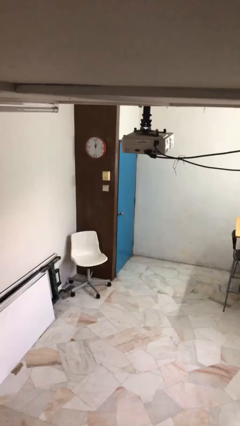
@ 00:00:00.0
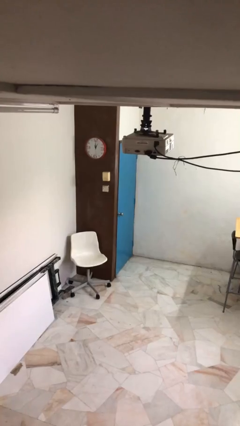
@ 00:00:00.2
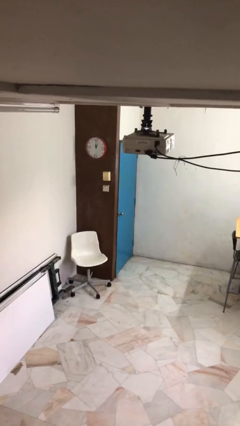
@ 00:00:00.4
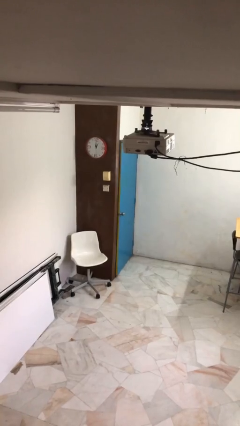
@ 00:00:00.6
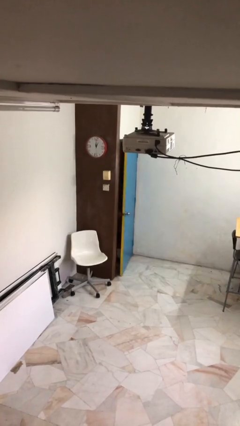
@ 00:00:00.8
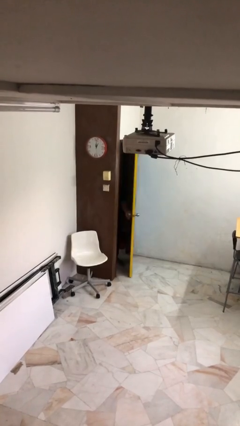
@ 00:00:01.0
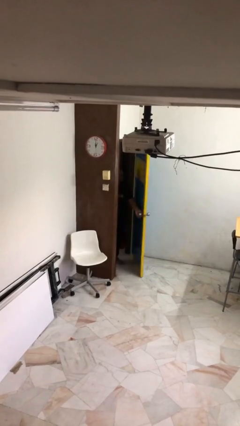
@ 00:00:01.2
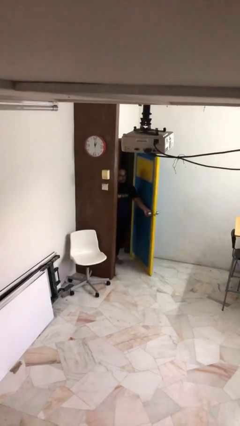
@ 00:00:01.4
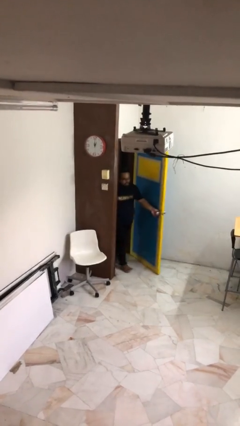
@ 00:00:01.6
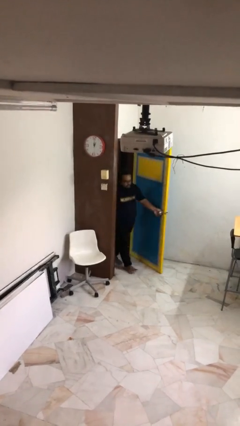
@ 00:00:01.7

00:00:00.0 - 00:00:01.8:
person opens facility door

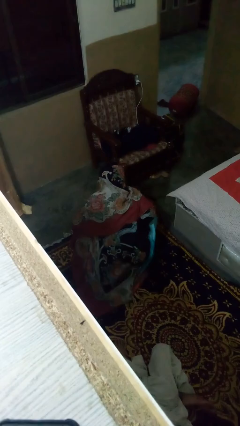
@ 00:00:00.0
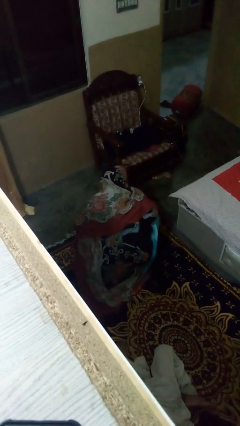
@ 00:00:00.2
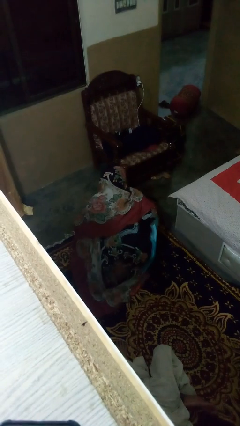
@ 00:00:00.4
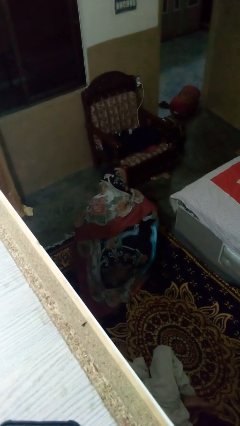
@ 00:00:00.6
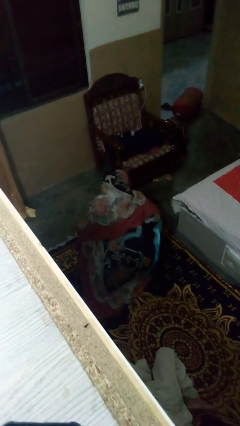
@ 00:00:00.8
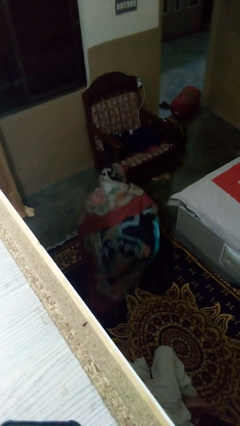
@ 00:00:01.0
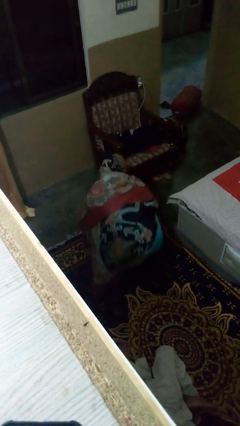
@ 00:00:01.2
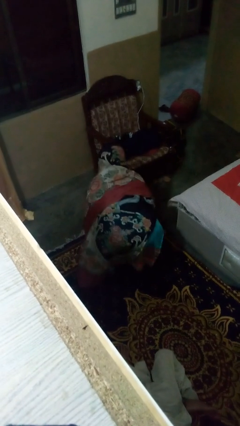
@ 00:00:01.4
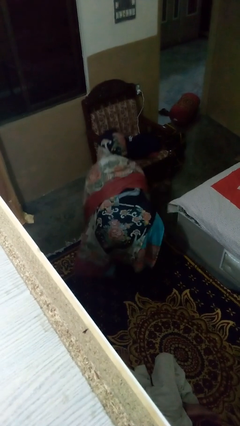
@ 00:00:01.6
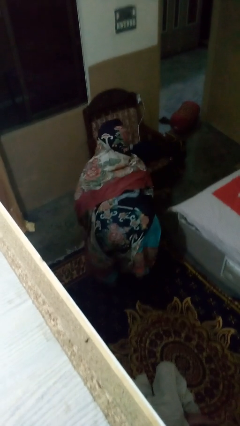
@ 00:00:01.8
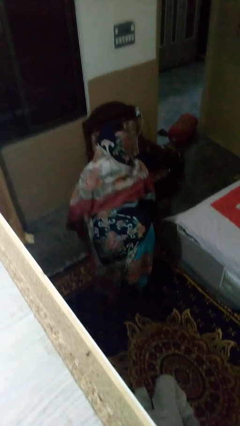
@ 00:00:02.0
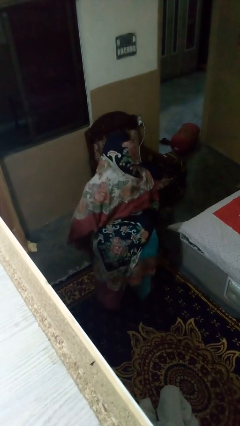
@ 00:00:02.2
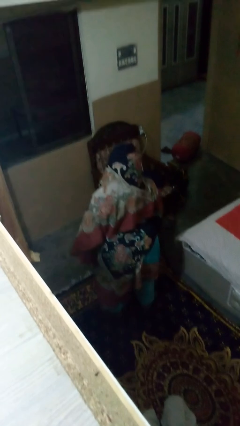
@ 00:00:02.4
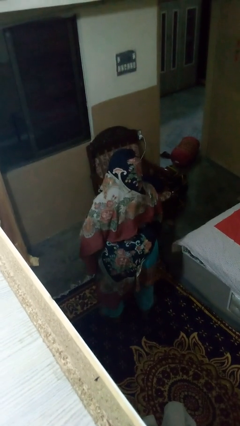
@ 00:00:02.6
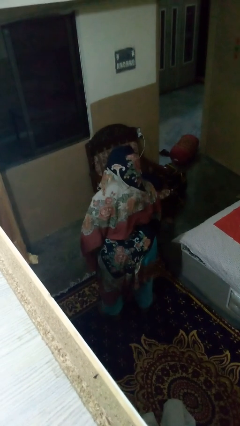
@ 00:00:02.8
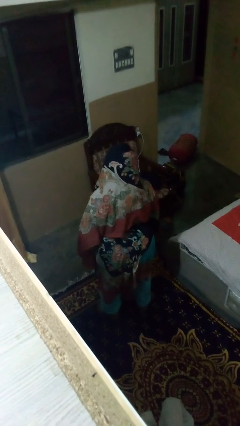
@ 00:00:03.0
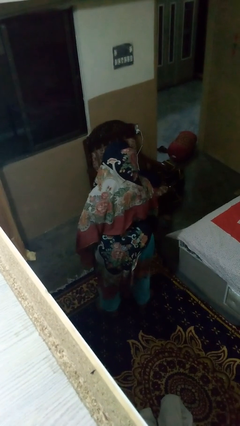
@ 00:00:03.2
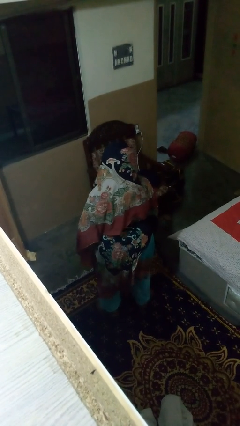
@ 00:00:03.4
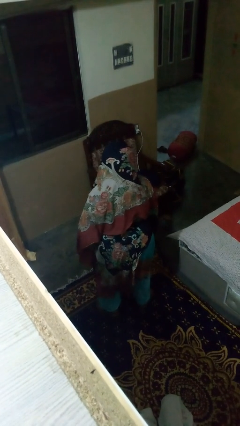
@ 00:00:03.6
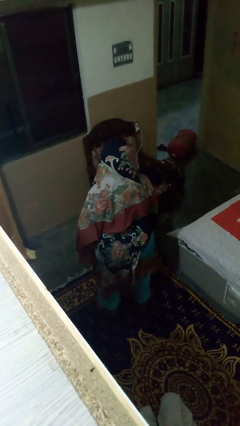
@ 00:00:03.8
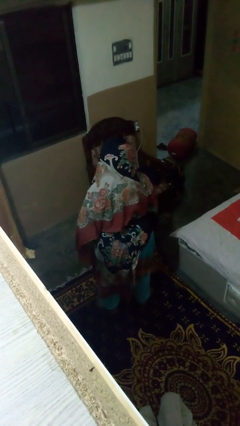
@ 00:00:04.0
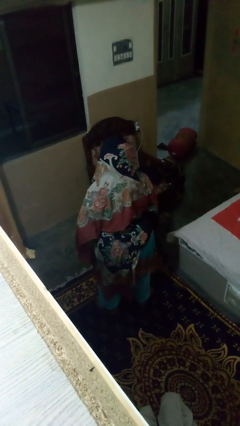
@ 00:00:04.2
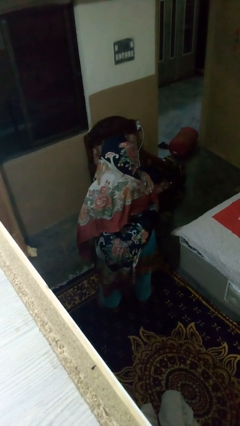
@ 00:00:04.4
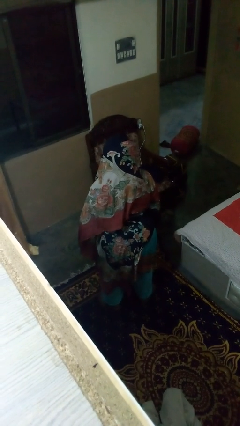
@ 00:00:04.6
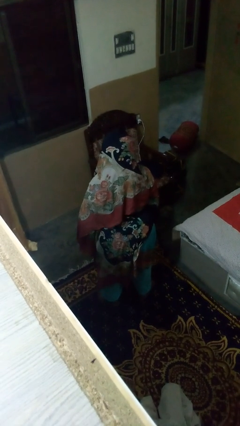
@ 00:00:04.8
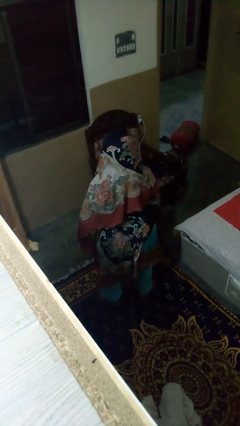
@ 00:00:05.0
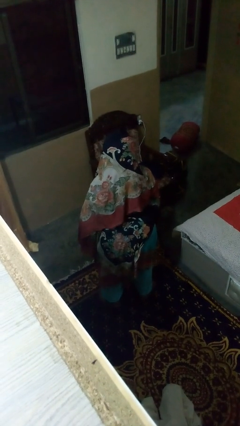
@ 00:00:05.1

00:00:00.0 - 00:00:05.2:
person stands up

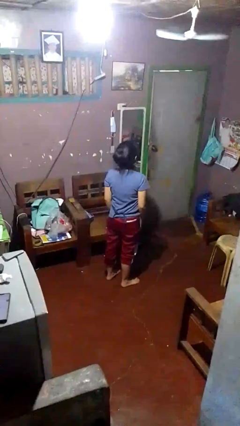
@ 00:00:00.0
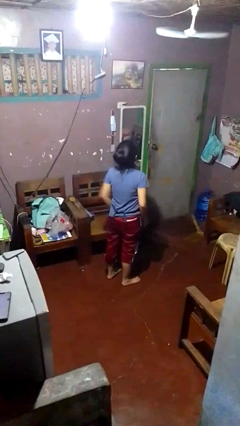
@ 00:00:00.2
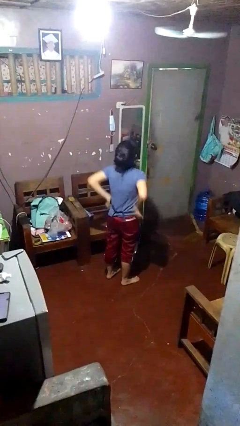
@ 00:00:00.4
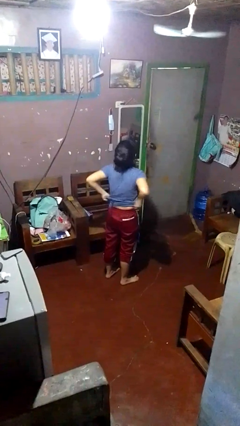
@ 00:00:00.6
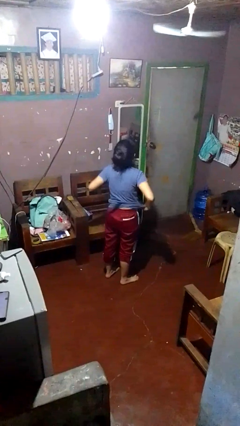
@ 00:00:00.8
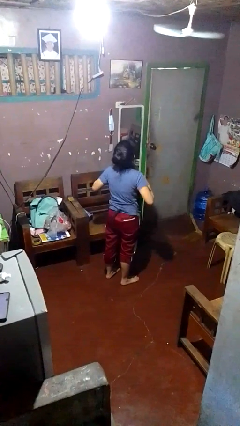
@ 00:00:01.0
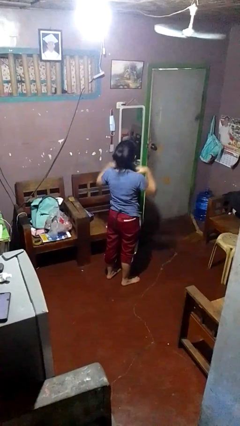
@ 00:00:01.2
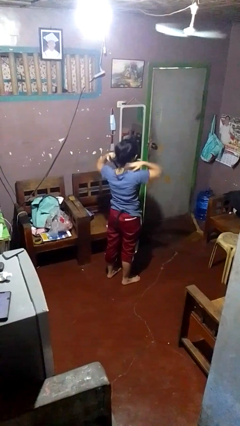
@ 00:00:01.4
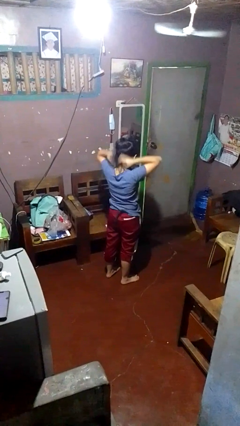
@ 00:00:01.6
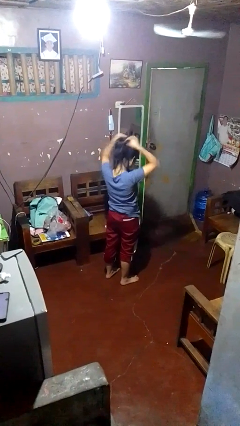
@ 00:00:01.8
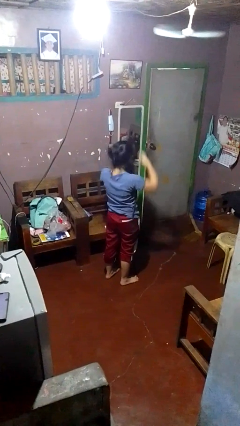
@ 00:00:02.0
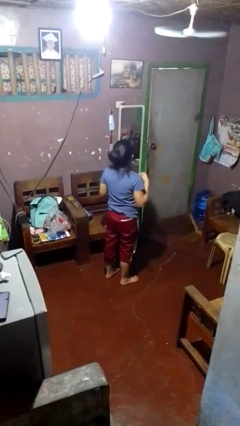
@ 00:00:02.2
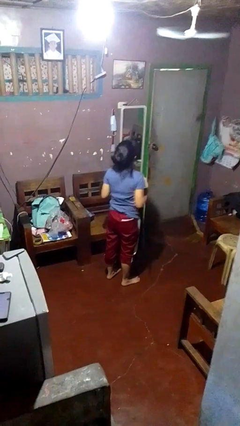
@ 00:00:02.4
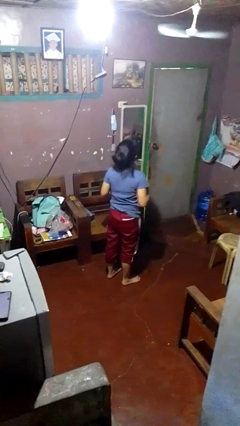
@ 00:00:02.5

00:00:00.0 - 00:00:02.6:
person takes off apron

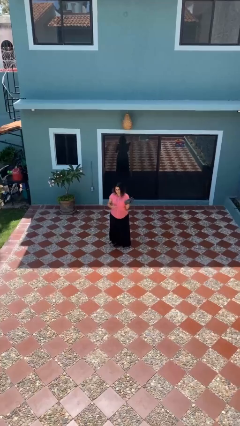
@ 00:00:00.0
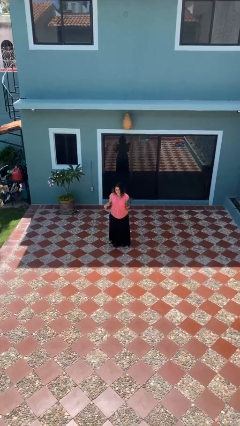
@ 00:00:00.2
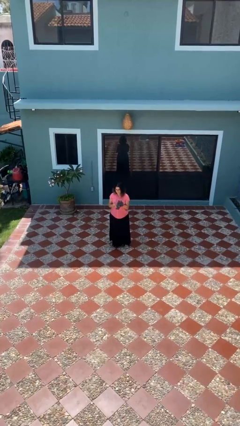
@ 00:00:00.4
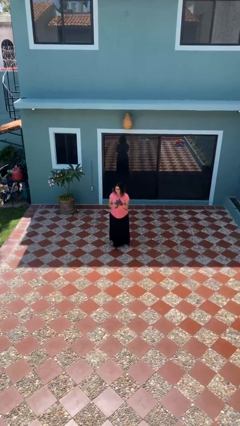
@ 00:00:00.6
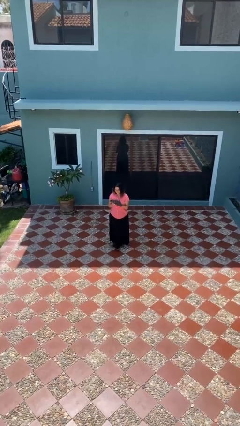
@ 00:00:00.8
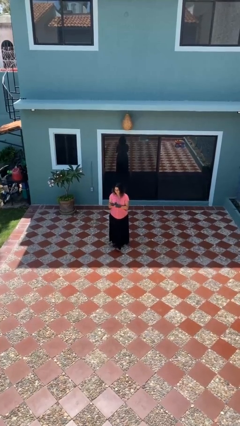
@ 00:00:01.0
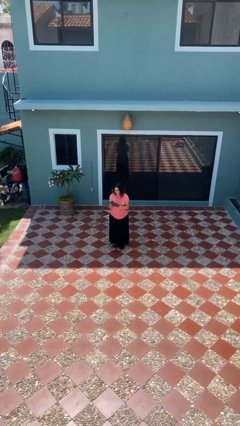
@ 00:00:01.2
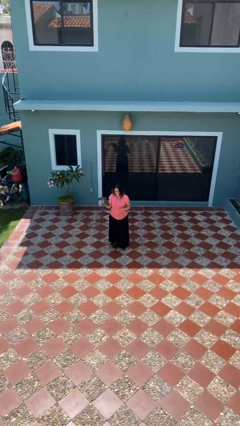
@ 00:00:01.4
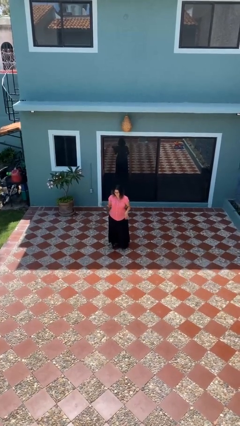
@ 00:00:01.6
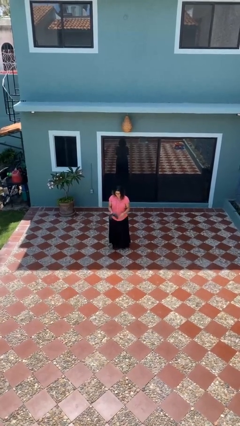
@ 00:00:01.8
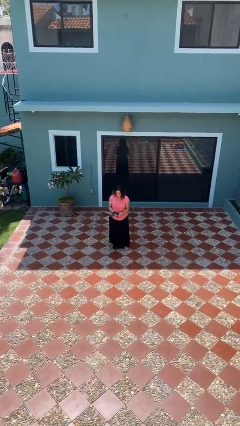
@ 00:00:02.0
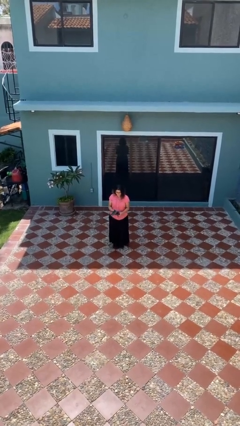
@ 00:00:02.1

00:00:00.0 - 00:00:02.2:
person takes off gloves

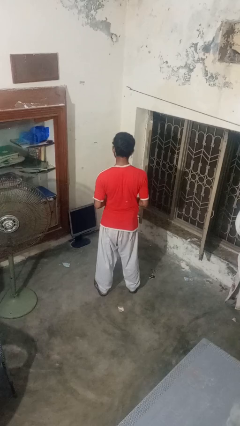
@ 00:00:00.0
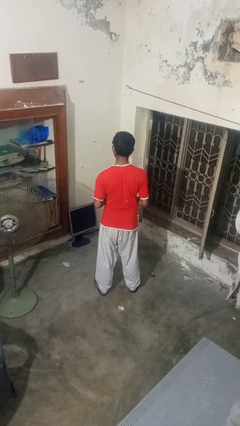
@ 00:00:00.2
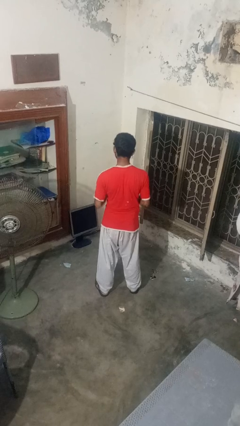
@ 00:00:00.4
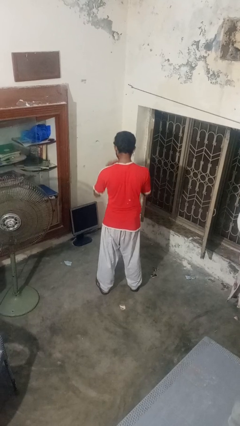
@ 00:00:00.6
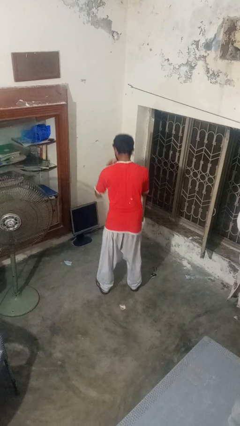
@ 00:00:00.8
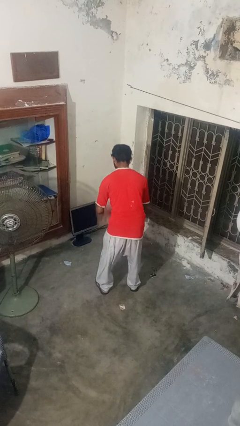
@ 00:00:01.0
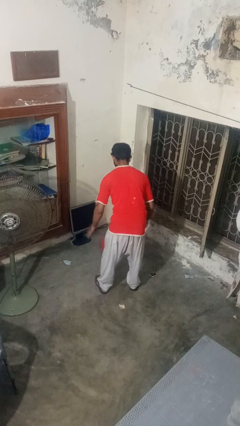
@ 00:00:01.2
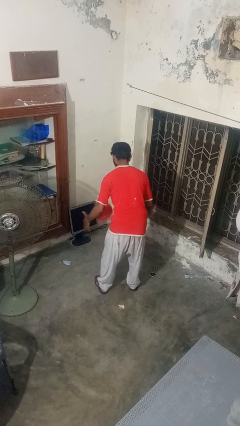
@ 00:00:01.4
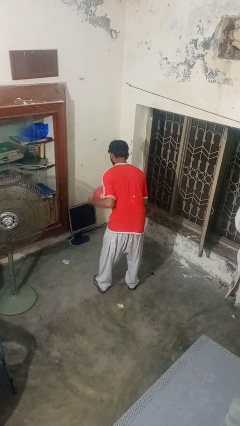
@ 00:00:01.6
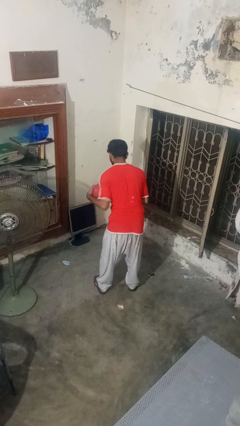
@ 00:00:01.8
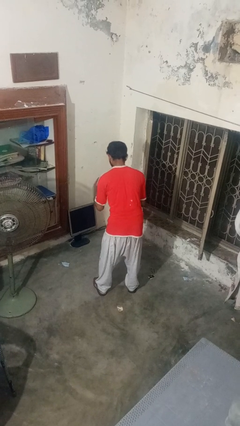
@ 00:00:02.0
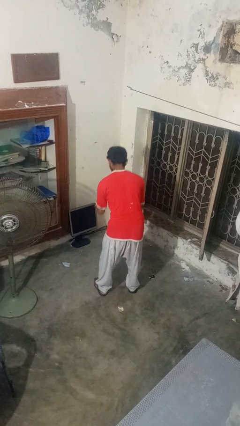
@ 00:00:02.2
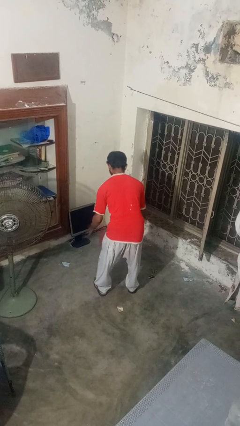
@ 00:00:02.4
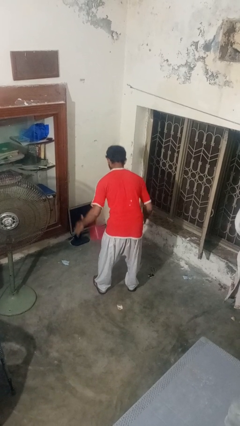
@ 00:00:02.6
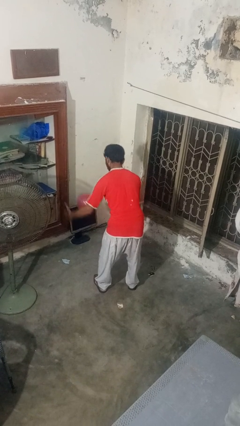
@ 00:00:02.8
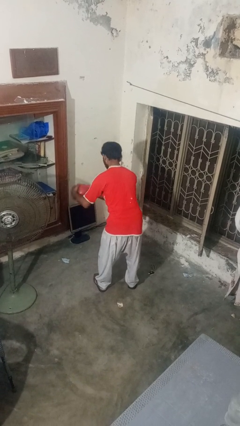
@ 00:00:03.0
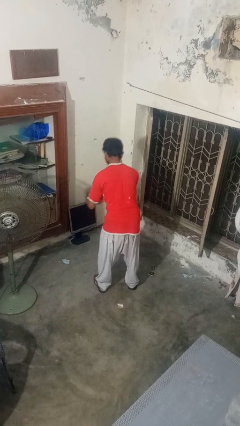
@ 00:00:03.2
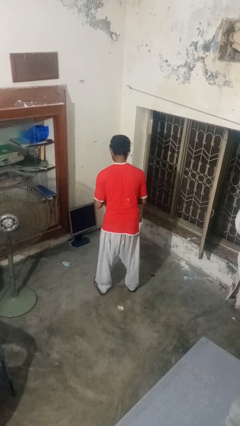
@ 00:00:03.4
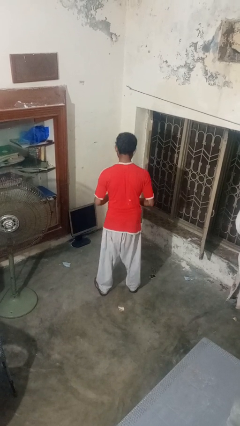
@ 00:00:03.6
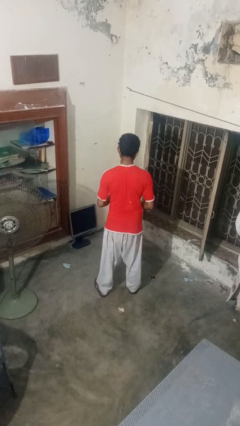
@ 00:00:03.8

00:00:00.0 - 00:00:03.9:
person bounces ball on floor

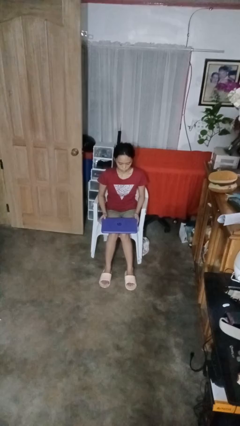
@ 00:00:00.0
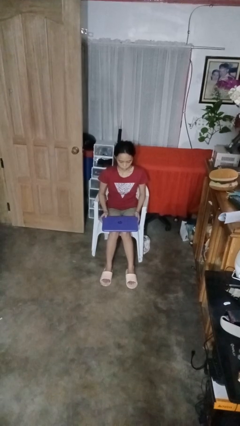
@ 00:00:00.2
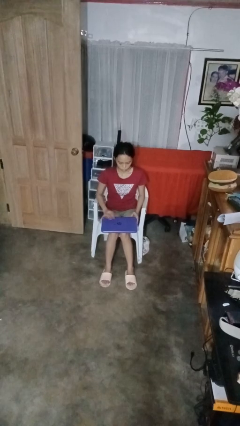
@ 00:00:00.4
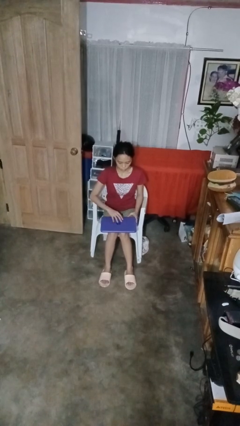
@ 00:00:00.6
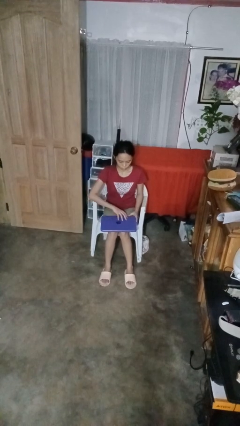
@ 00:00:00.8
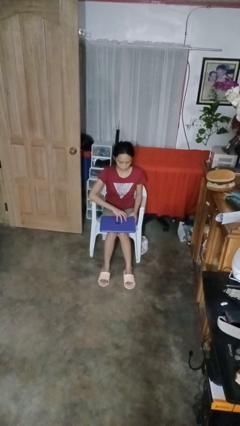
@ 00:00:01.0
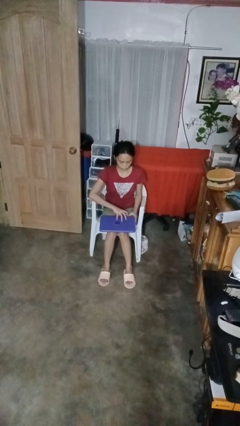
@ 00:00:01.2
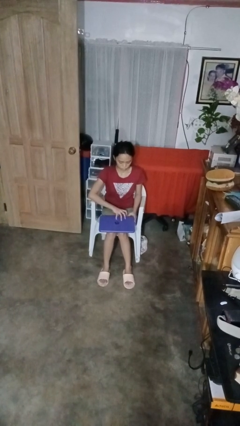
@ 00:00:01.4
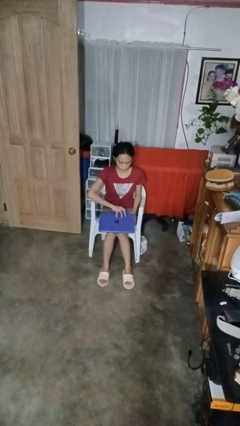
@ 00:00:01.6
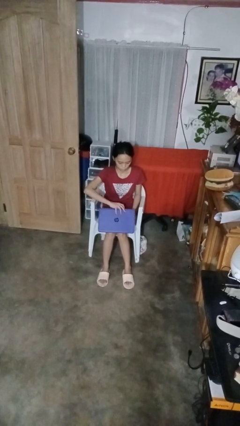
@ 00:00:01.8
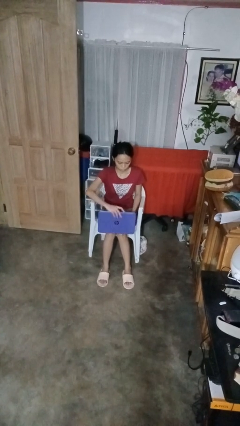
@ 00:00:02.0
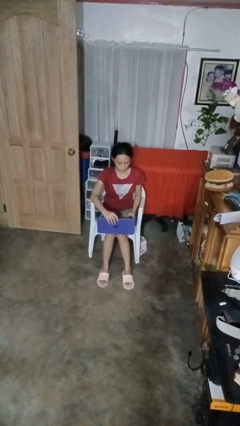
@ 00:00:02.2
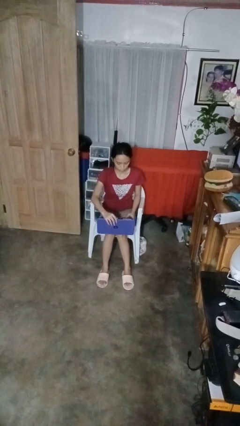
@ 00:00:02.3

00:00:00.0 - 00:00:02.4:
person opens laptop
